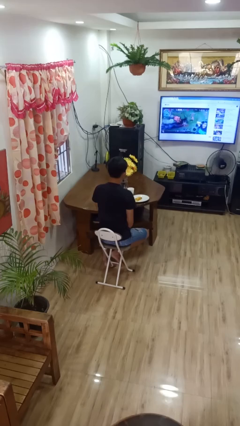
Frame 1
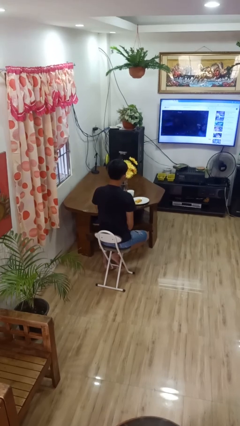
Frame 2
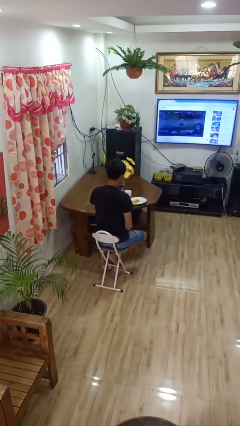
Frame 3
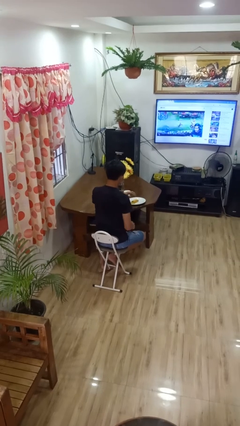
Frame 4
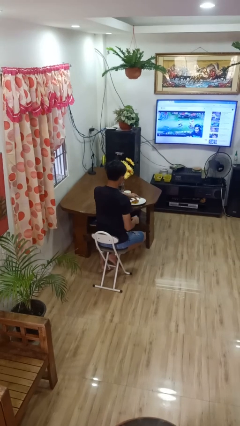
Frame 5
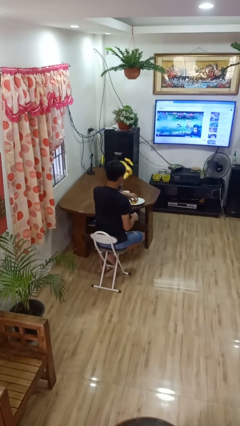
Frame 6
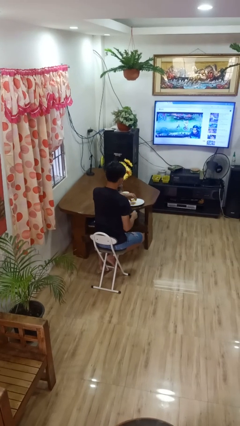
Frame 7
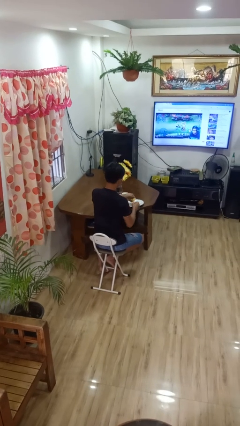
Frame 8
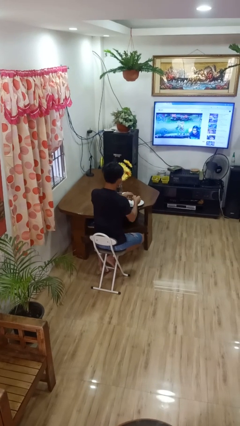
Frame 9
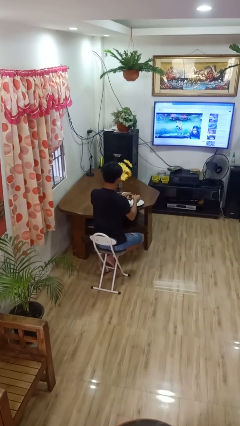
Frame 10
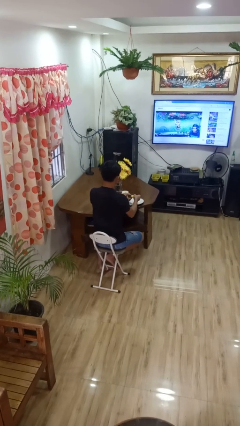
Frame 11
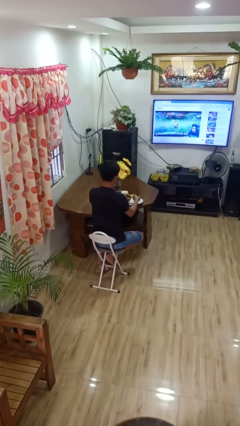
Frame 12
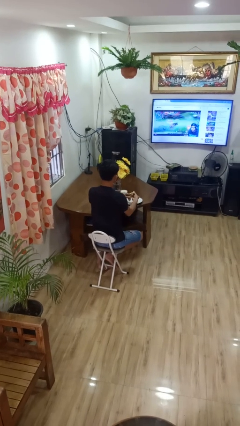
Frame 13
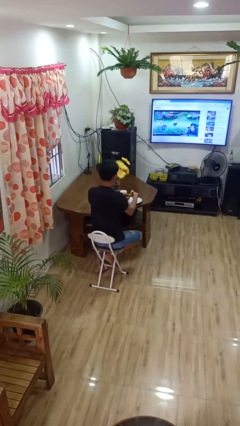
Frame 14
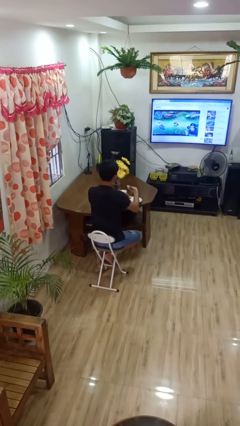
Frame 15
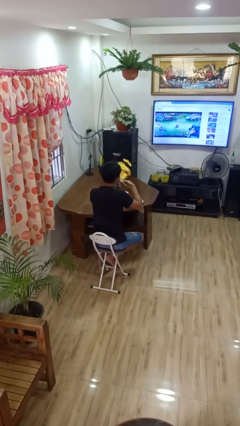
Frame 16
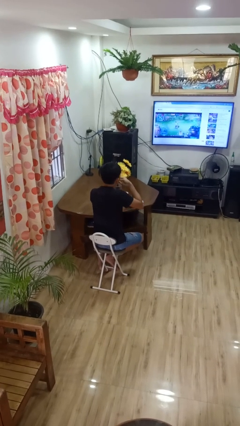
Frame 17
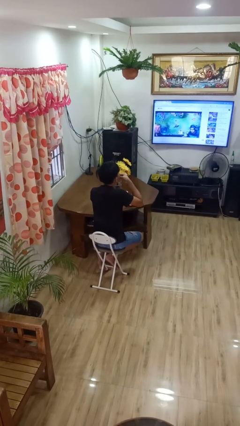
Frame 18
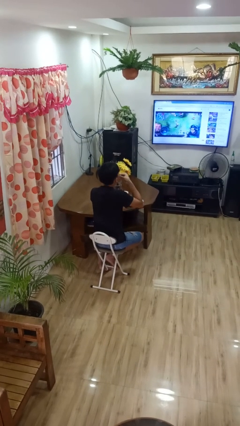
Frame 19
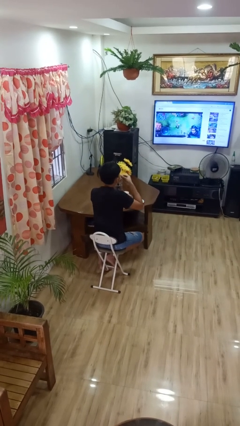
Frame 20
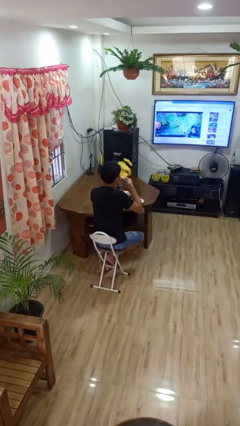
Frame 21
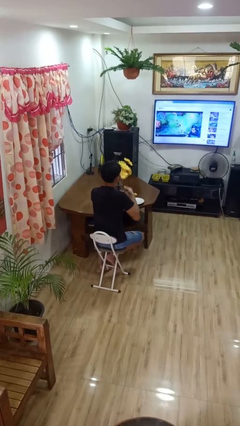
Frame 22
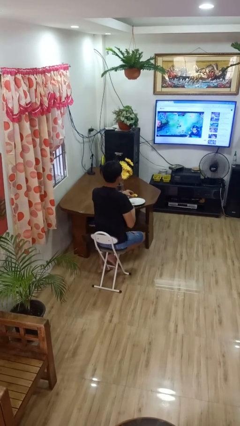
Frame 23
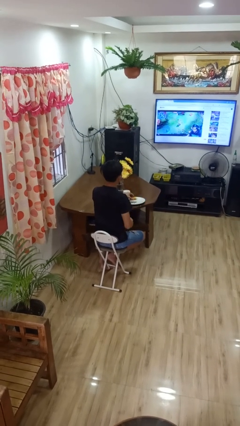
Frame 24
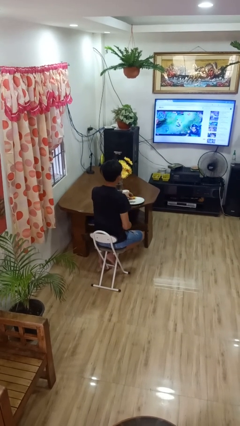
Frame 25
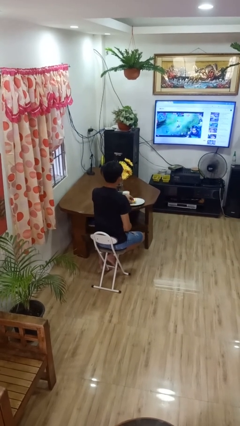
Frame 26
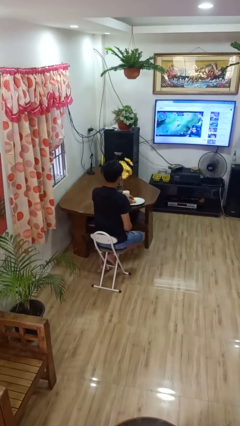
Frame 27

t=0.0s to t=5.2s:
person eats with hands

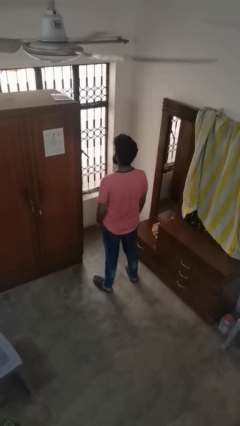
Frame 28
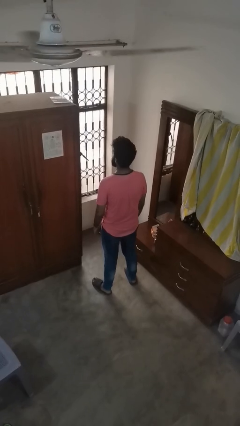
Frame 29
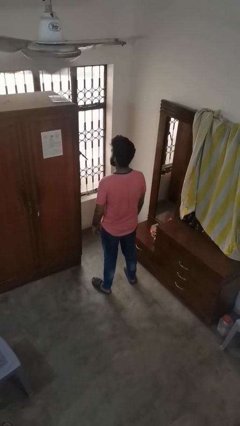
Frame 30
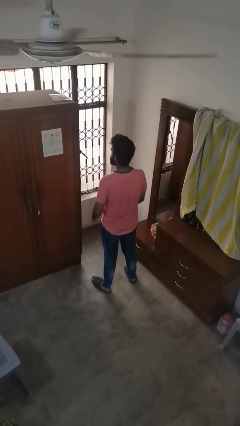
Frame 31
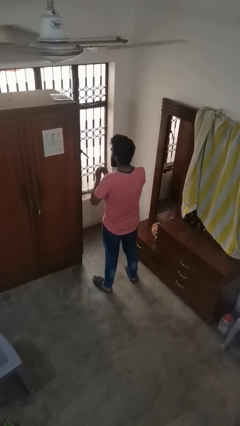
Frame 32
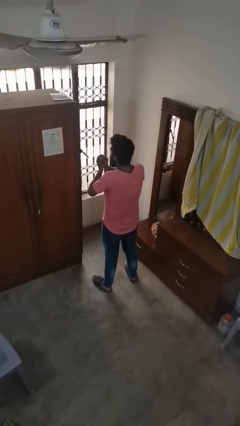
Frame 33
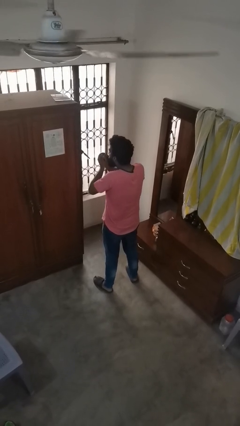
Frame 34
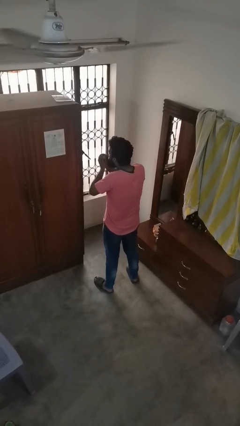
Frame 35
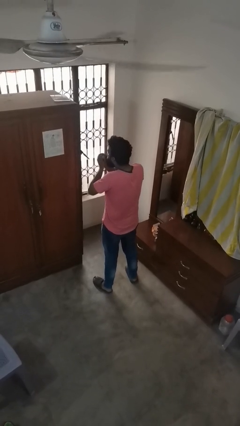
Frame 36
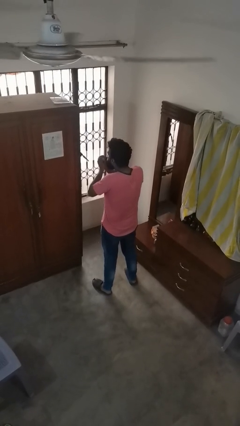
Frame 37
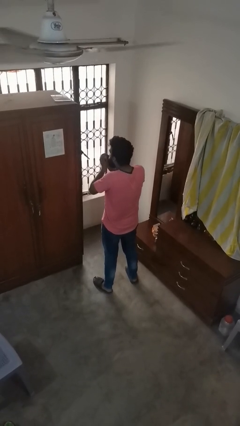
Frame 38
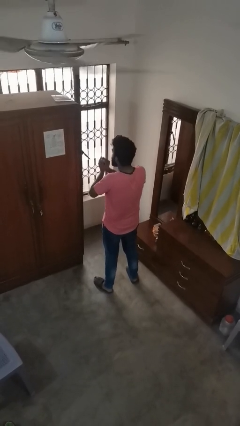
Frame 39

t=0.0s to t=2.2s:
person blows into hands

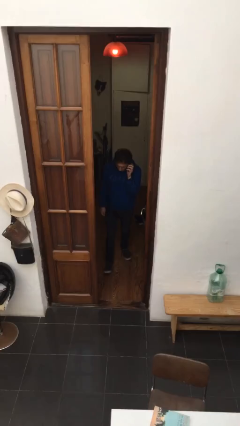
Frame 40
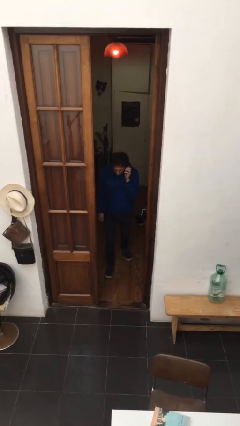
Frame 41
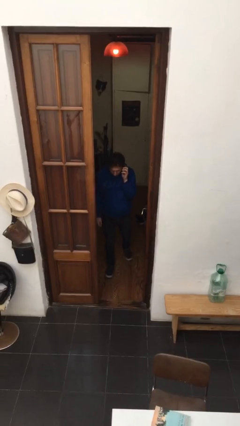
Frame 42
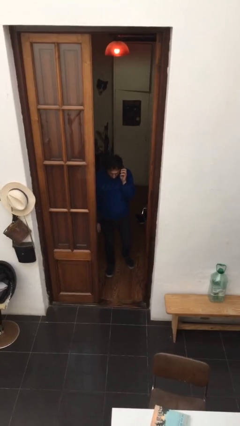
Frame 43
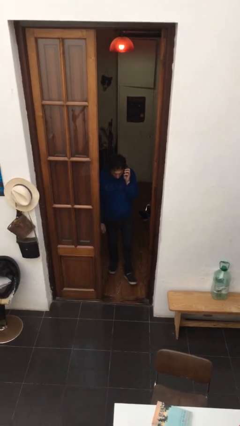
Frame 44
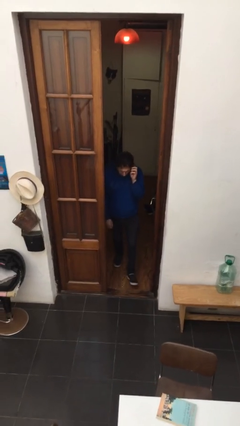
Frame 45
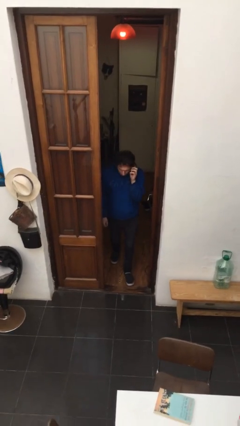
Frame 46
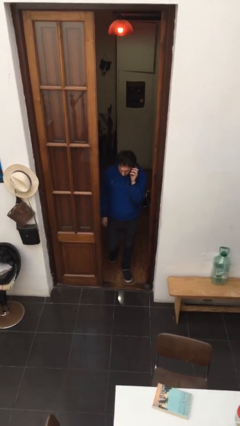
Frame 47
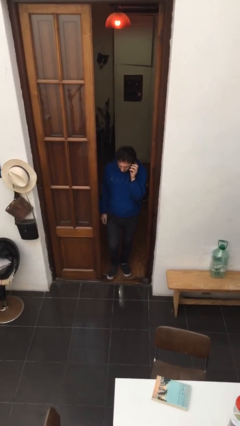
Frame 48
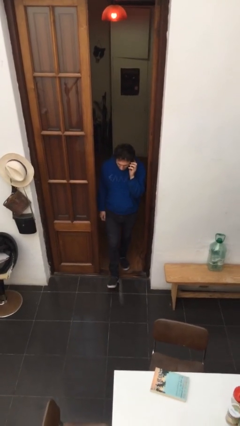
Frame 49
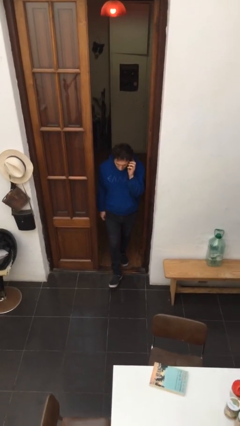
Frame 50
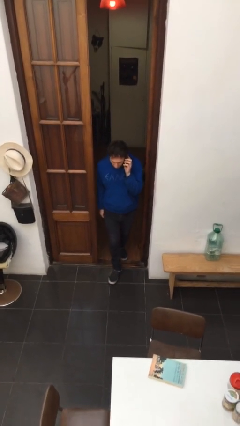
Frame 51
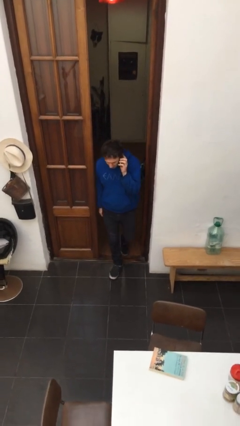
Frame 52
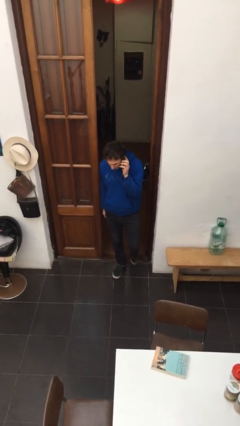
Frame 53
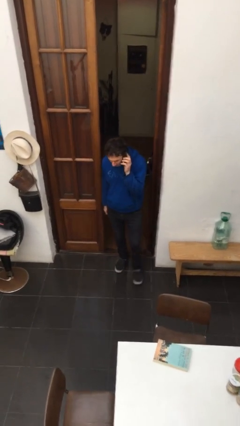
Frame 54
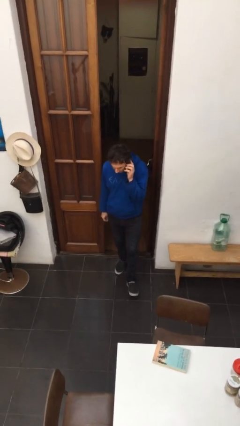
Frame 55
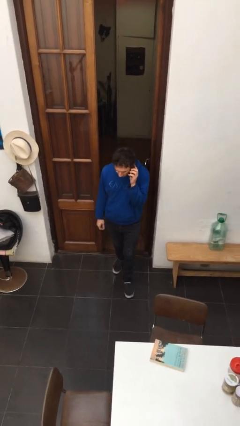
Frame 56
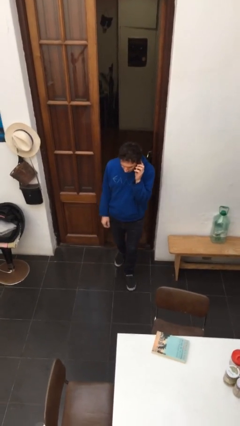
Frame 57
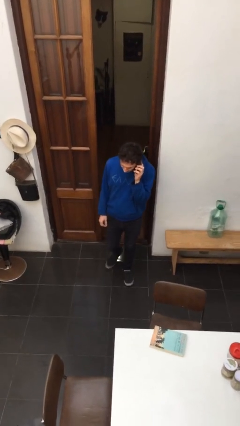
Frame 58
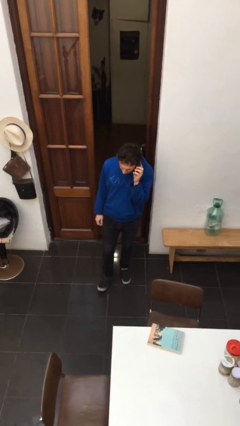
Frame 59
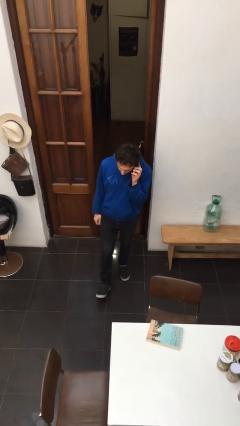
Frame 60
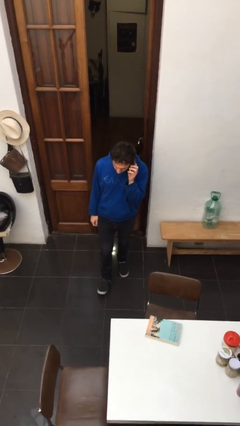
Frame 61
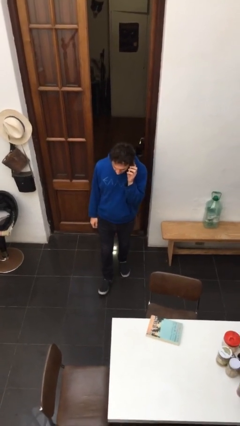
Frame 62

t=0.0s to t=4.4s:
person enters scene through structure

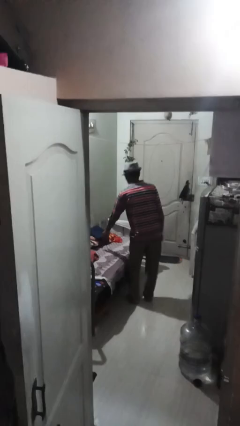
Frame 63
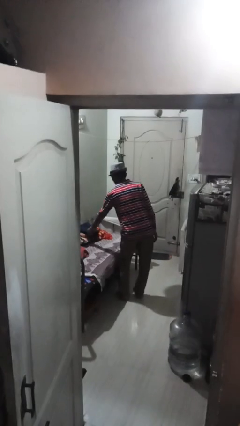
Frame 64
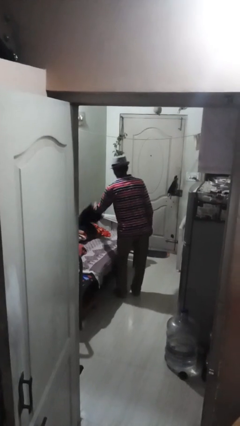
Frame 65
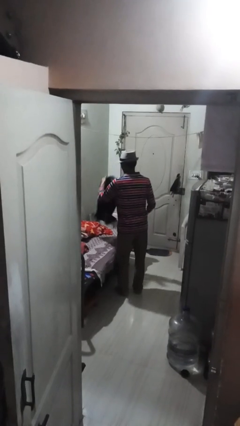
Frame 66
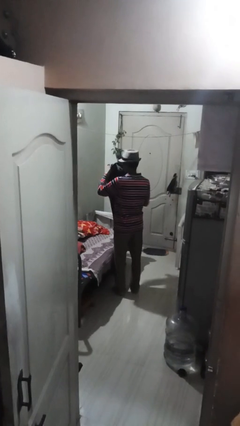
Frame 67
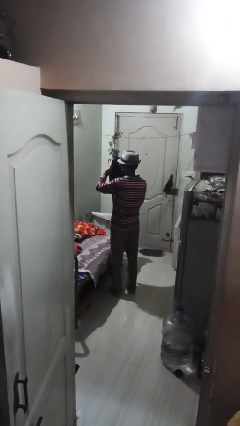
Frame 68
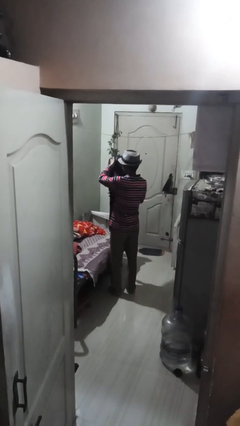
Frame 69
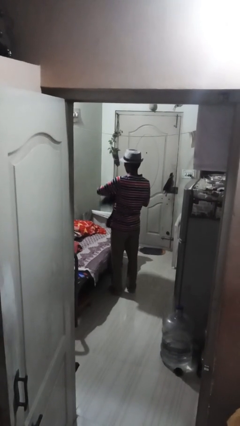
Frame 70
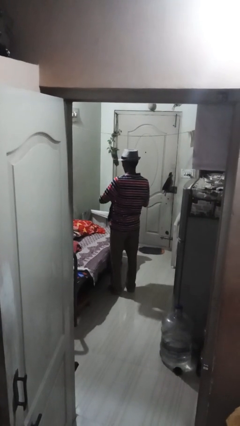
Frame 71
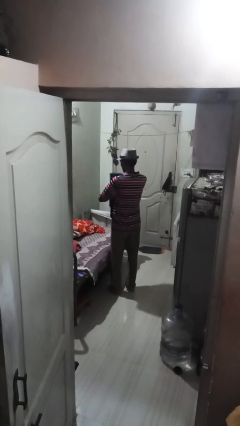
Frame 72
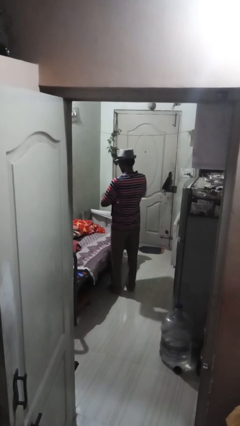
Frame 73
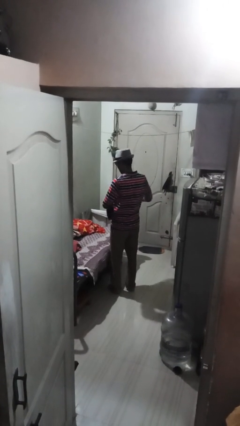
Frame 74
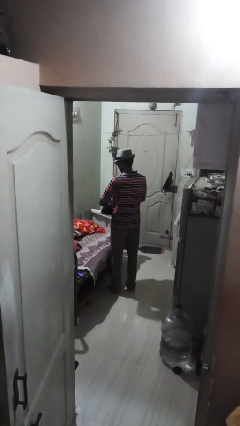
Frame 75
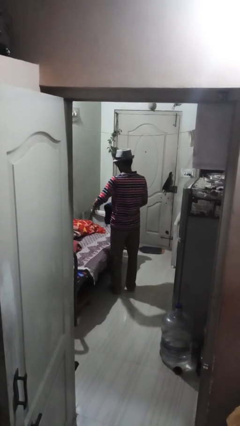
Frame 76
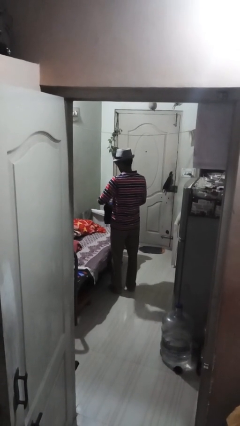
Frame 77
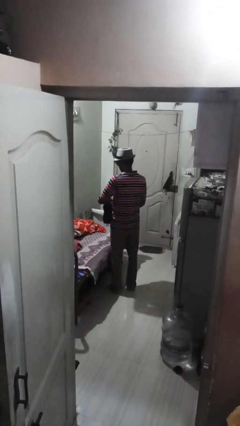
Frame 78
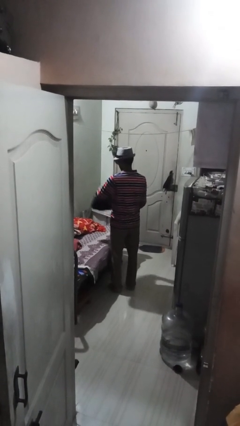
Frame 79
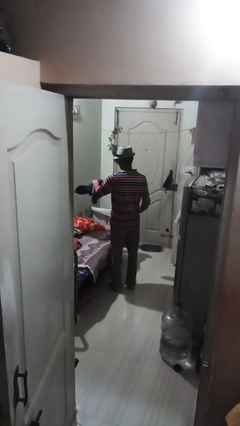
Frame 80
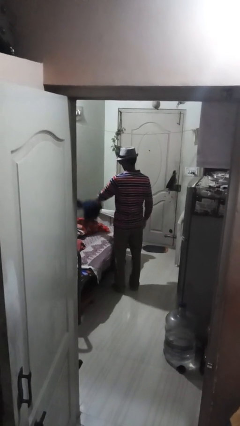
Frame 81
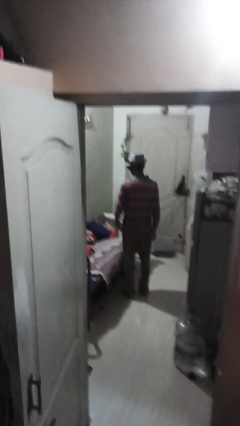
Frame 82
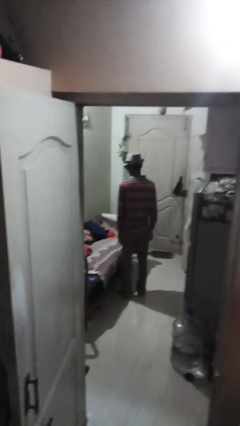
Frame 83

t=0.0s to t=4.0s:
person folds pants

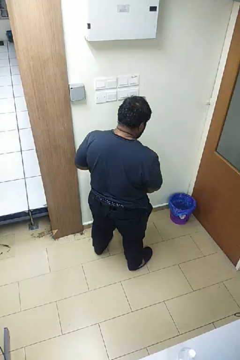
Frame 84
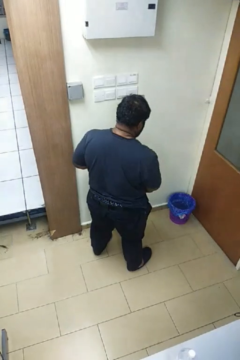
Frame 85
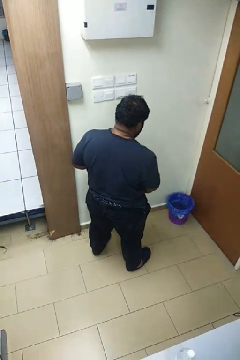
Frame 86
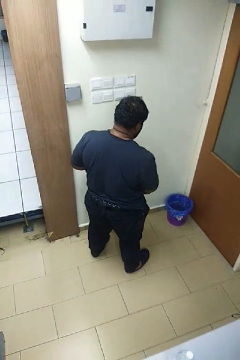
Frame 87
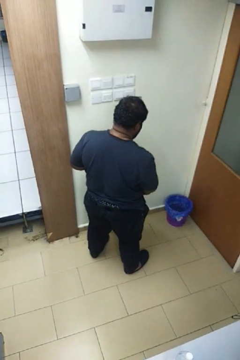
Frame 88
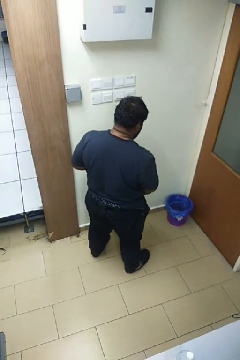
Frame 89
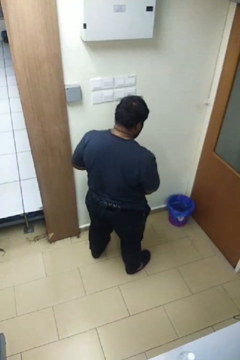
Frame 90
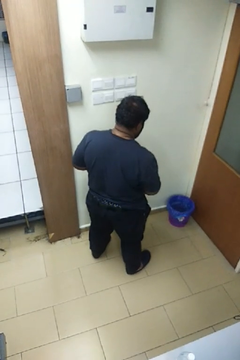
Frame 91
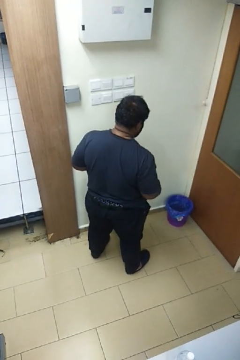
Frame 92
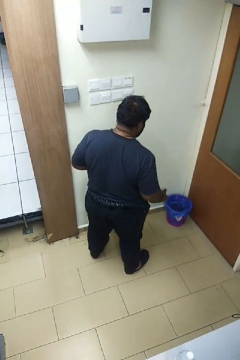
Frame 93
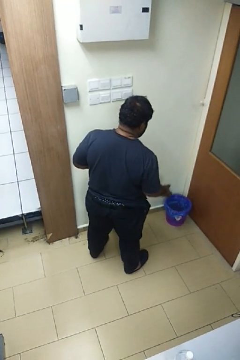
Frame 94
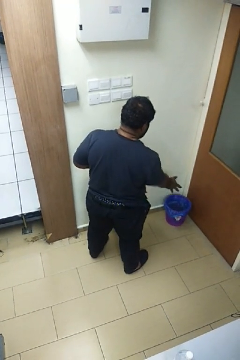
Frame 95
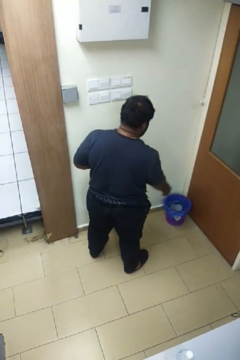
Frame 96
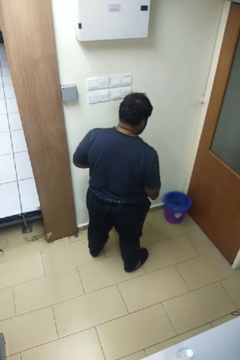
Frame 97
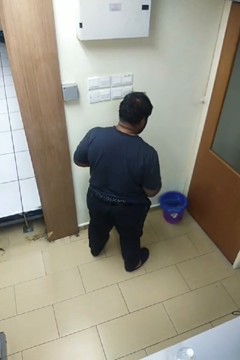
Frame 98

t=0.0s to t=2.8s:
person discards trash
